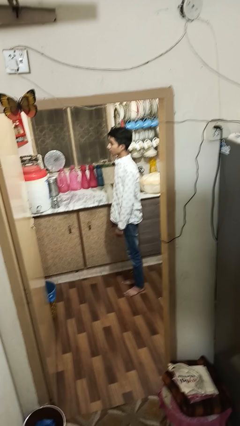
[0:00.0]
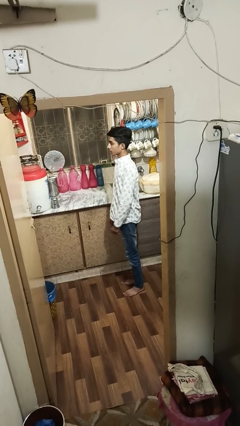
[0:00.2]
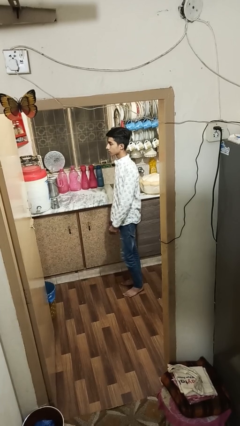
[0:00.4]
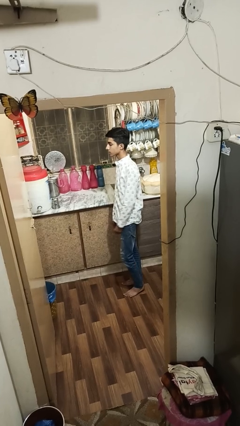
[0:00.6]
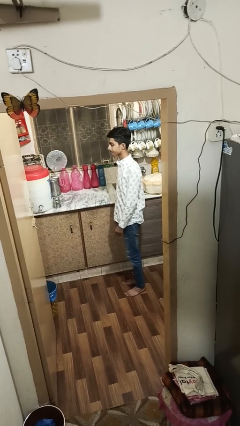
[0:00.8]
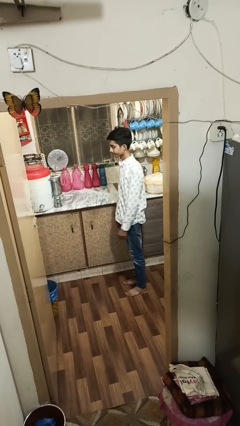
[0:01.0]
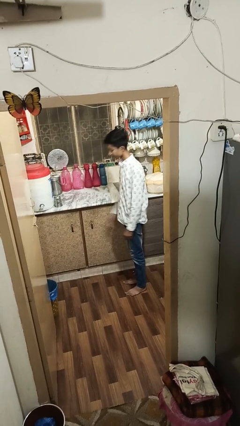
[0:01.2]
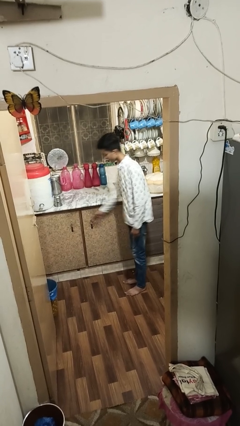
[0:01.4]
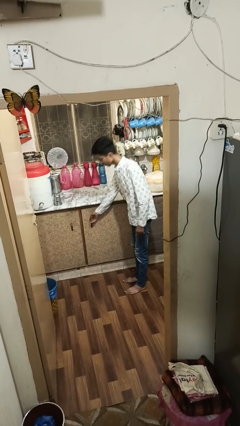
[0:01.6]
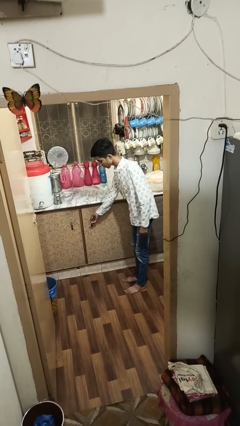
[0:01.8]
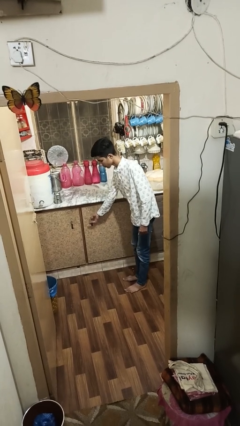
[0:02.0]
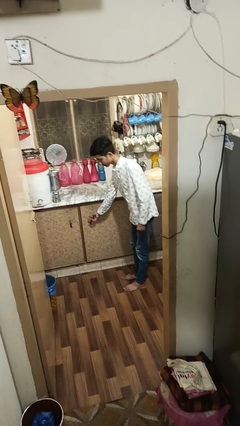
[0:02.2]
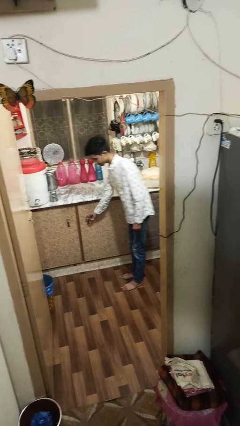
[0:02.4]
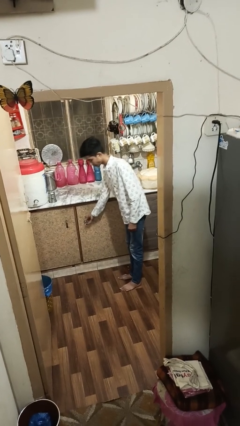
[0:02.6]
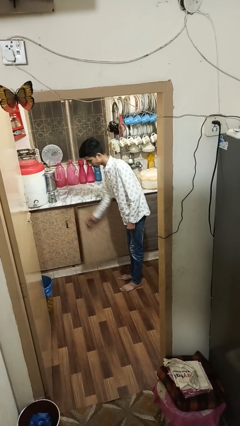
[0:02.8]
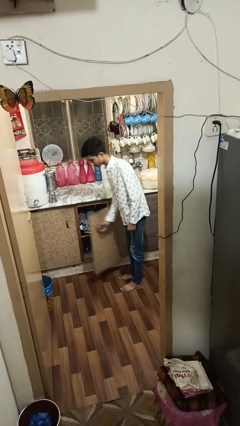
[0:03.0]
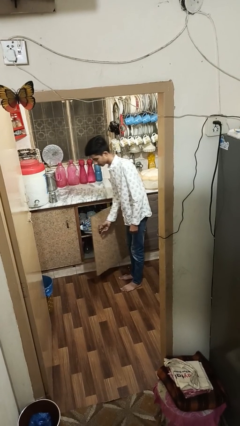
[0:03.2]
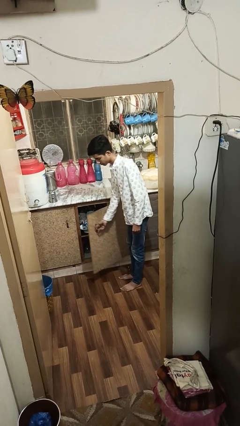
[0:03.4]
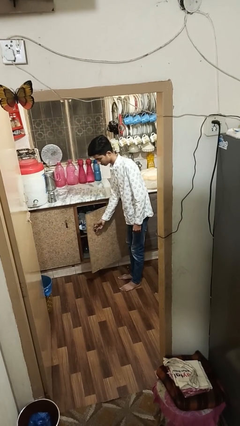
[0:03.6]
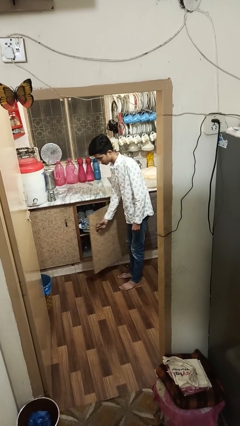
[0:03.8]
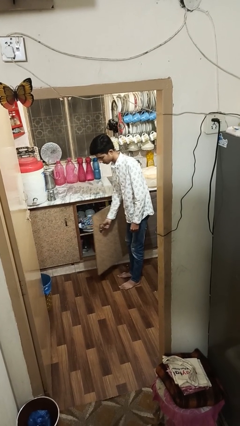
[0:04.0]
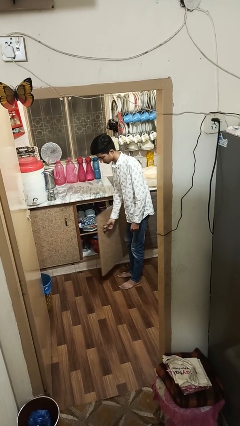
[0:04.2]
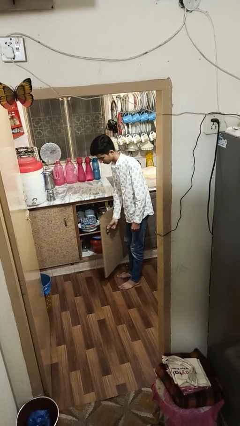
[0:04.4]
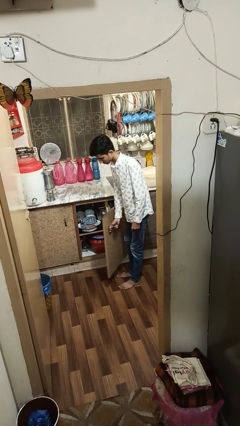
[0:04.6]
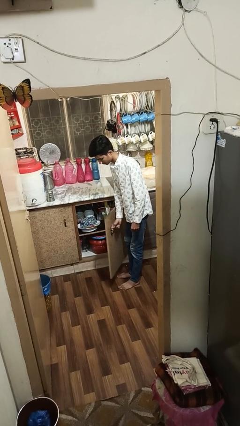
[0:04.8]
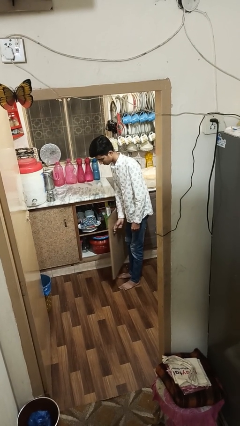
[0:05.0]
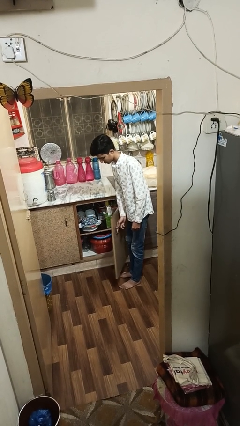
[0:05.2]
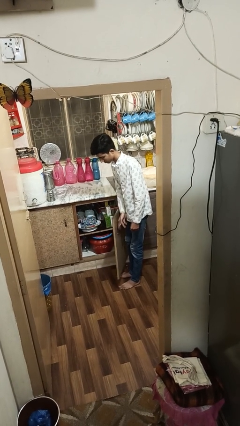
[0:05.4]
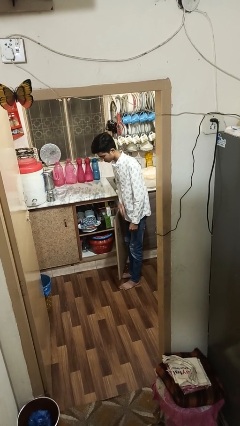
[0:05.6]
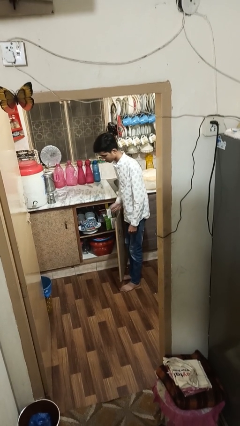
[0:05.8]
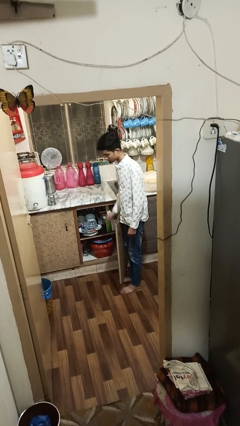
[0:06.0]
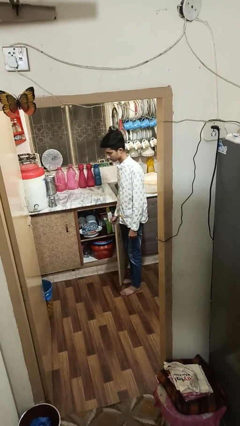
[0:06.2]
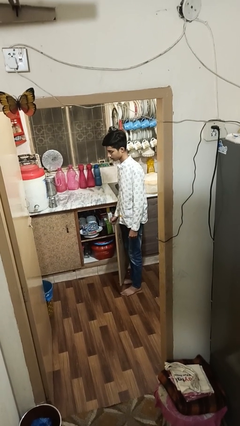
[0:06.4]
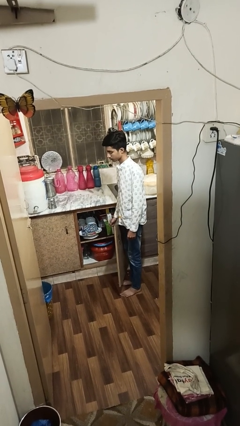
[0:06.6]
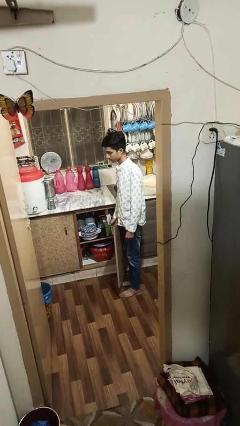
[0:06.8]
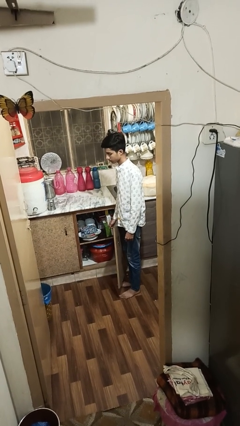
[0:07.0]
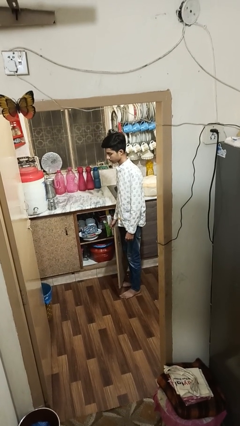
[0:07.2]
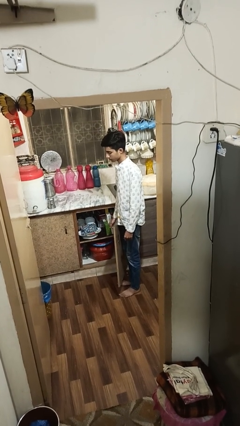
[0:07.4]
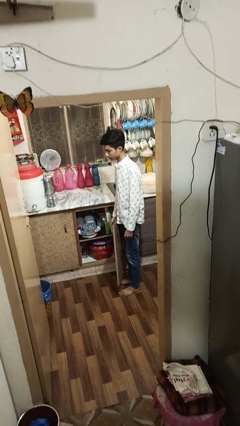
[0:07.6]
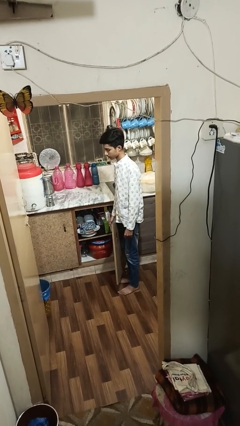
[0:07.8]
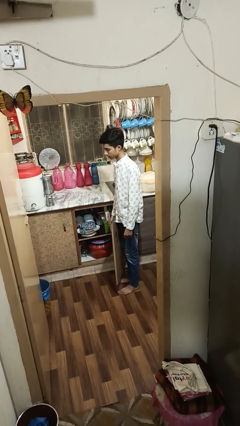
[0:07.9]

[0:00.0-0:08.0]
person opens cabinet

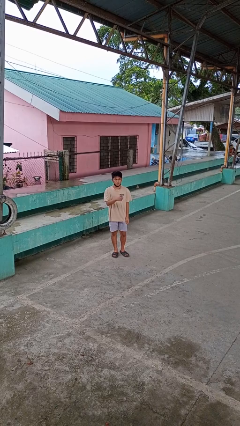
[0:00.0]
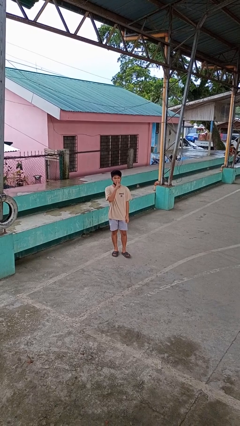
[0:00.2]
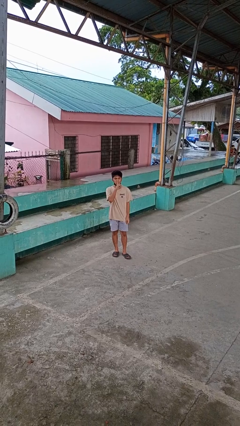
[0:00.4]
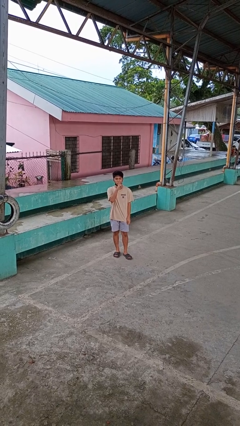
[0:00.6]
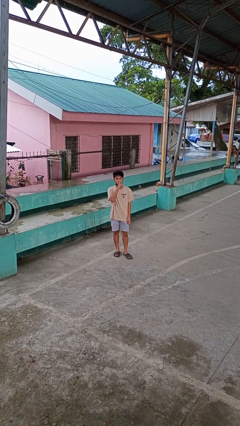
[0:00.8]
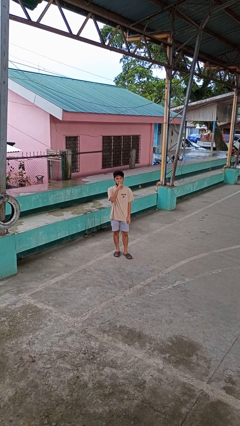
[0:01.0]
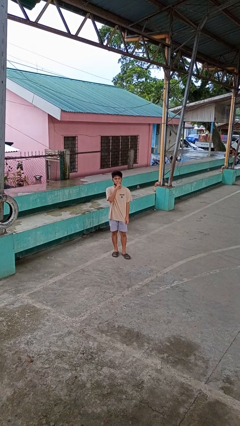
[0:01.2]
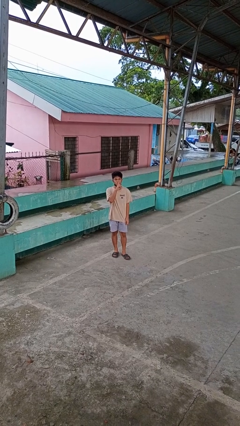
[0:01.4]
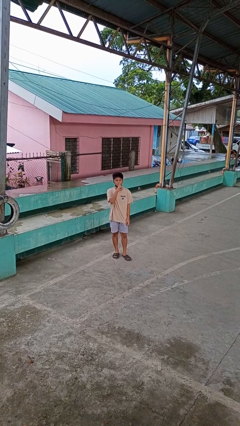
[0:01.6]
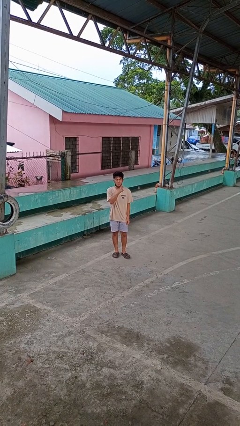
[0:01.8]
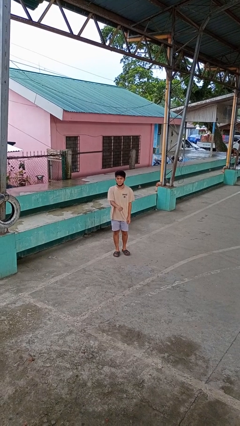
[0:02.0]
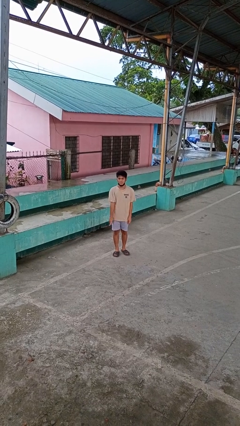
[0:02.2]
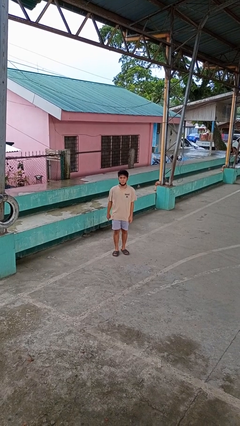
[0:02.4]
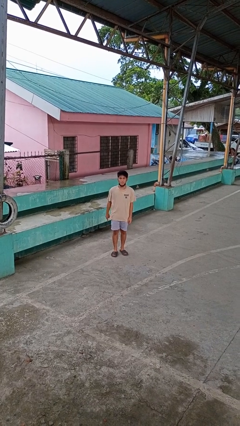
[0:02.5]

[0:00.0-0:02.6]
person gestures be quiet

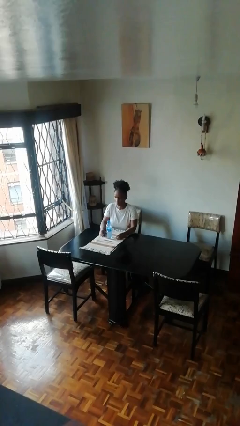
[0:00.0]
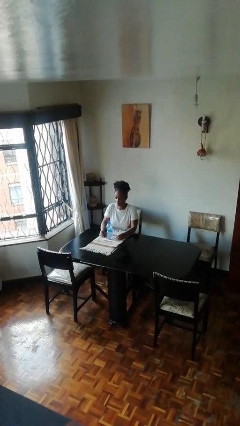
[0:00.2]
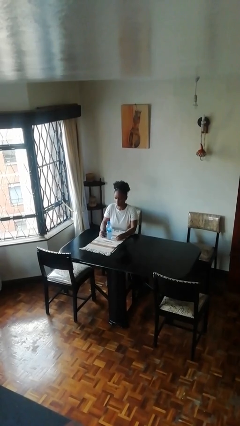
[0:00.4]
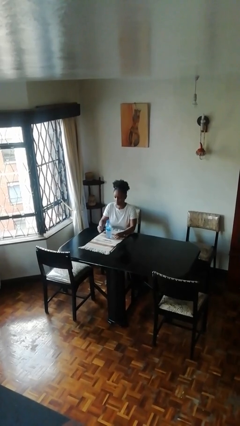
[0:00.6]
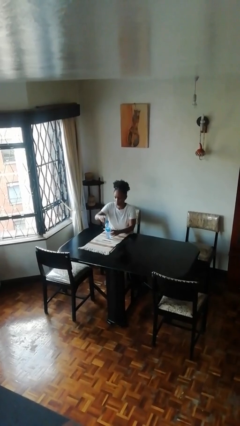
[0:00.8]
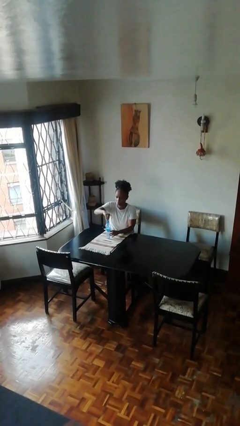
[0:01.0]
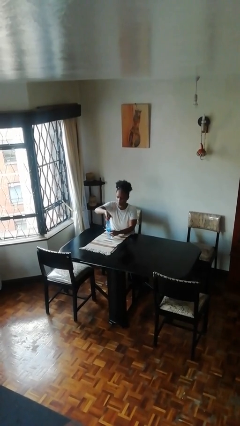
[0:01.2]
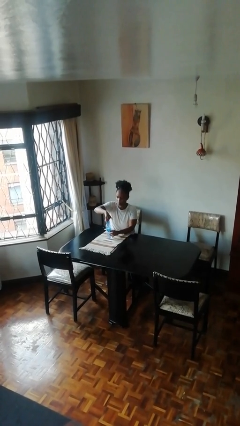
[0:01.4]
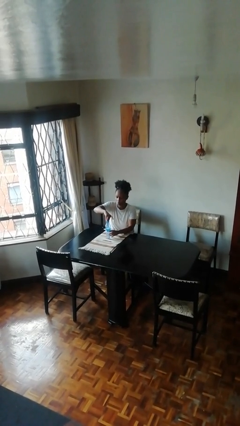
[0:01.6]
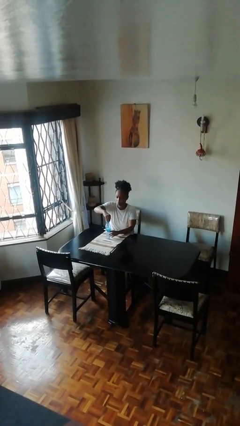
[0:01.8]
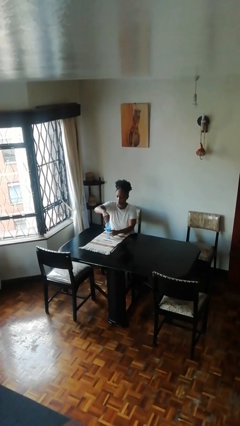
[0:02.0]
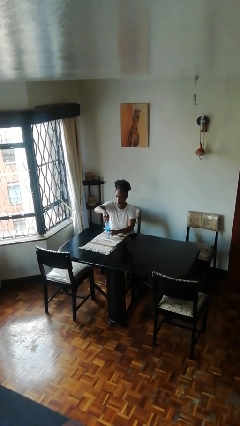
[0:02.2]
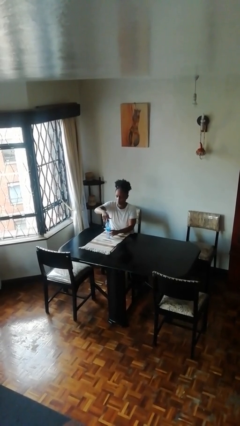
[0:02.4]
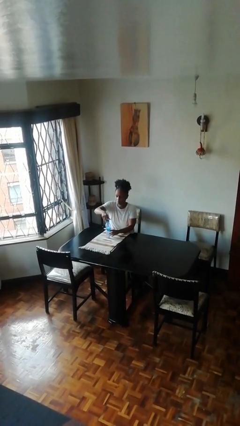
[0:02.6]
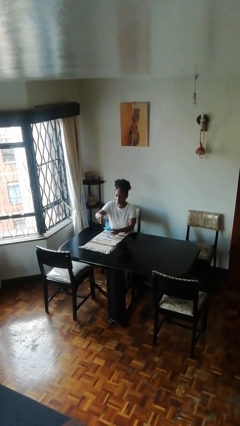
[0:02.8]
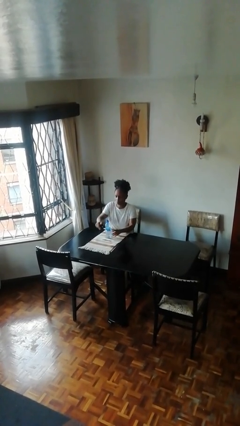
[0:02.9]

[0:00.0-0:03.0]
person screws lid to bottle

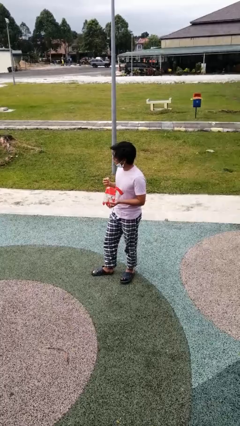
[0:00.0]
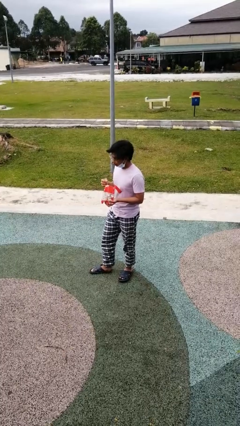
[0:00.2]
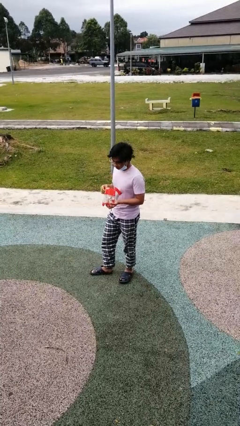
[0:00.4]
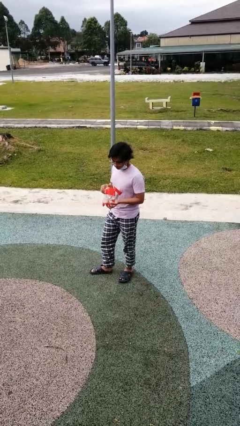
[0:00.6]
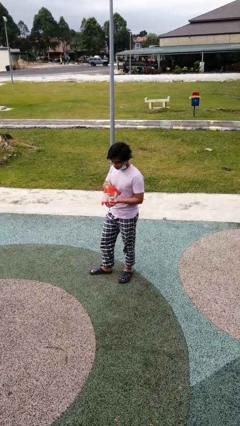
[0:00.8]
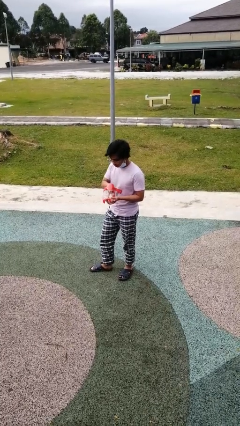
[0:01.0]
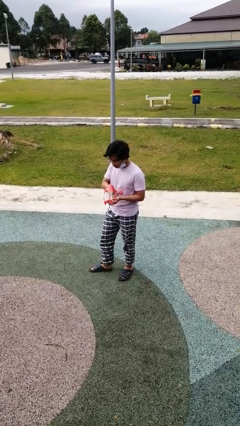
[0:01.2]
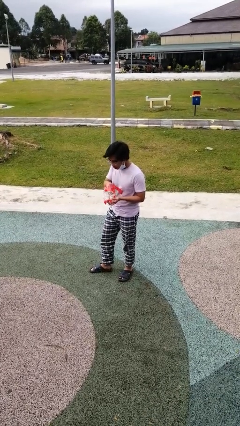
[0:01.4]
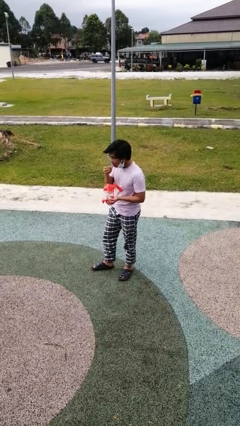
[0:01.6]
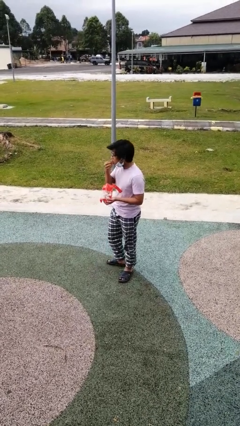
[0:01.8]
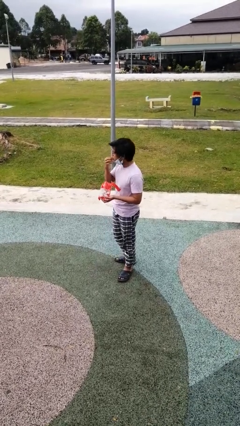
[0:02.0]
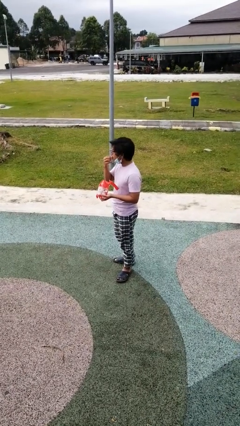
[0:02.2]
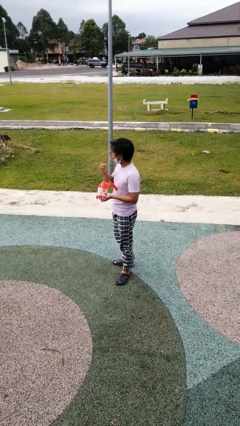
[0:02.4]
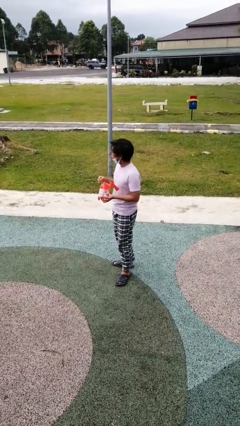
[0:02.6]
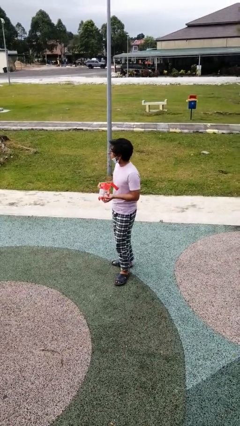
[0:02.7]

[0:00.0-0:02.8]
person eats snack from bag

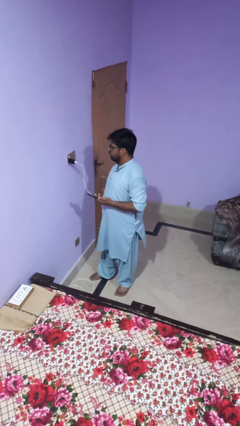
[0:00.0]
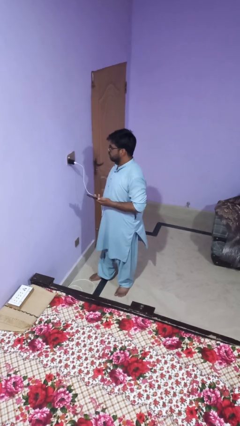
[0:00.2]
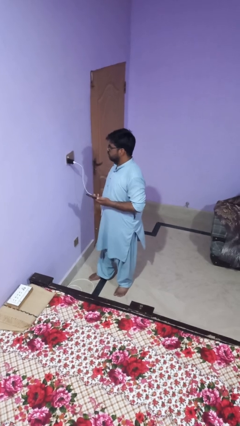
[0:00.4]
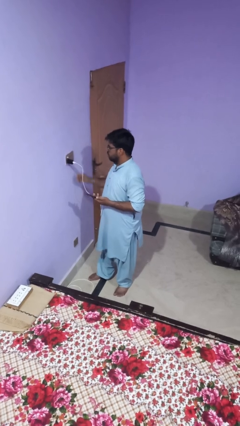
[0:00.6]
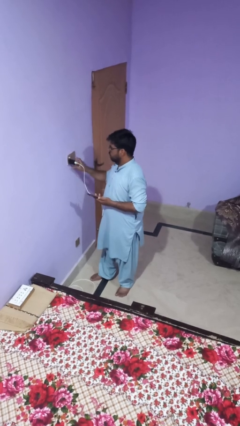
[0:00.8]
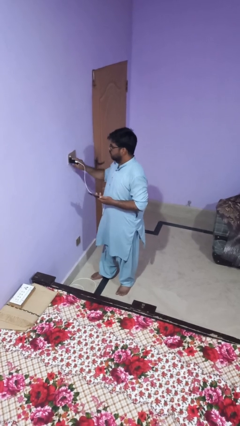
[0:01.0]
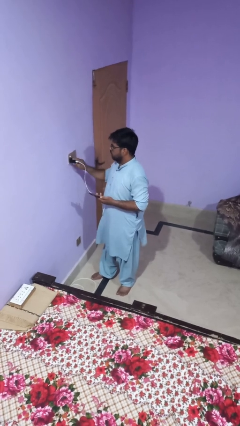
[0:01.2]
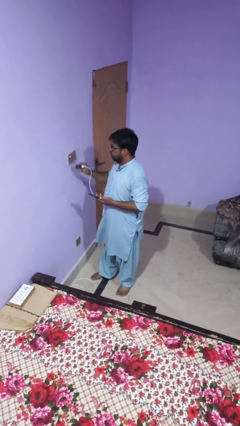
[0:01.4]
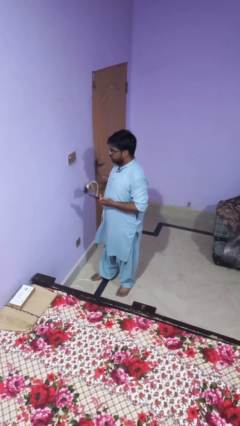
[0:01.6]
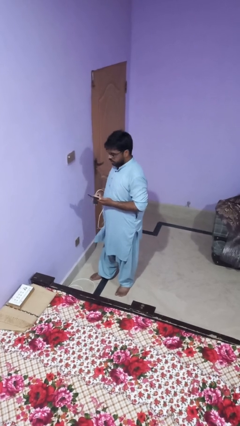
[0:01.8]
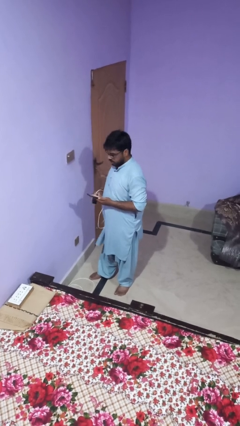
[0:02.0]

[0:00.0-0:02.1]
person unplugs from electrical socket
